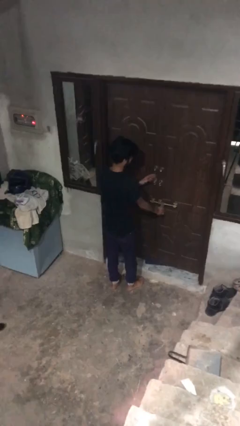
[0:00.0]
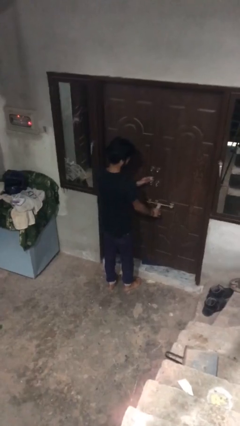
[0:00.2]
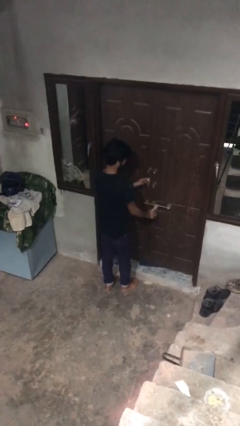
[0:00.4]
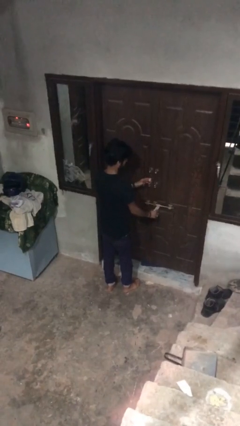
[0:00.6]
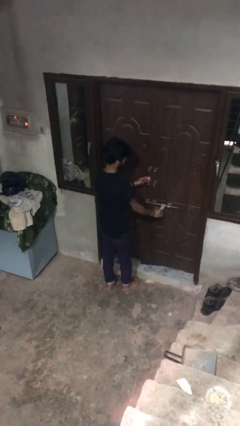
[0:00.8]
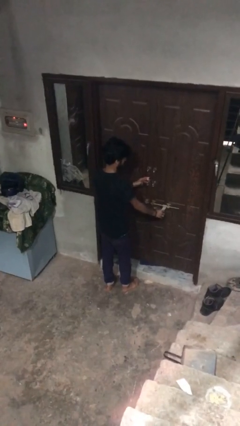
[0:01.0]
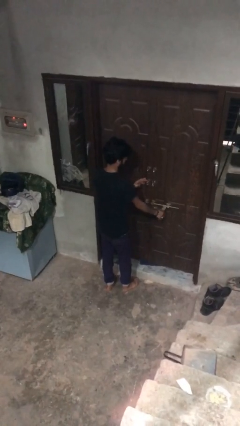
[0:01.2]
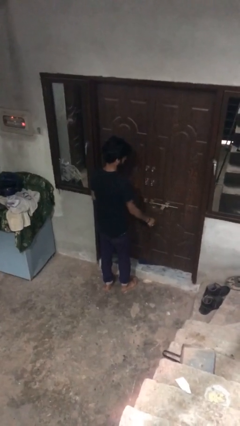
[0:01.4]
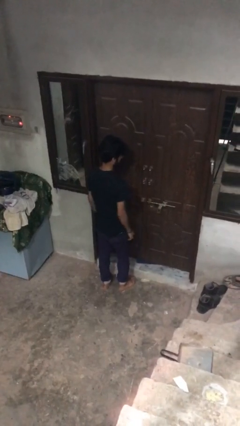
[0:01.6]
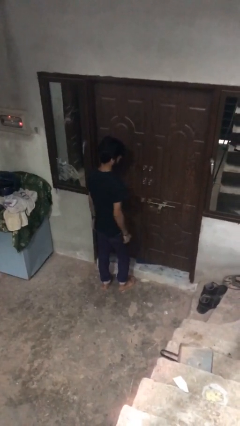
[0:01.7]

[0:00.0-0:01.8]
person unlocks door with keys

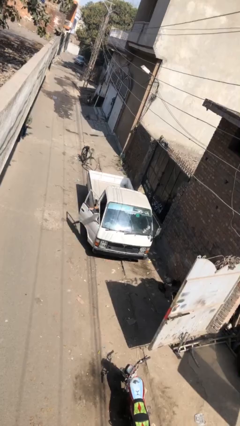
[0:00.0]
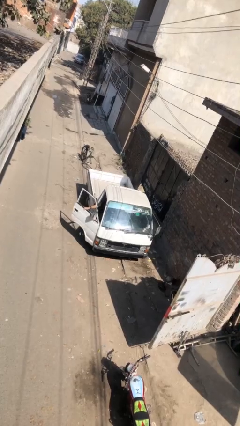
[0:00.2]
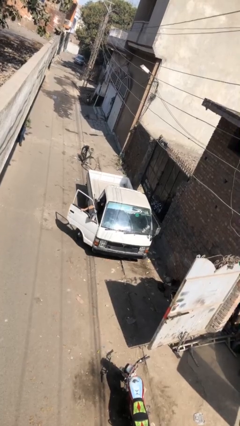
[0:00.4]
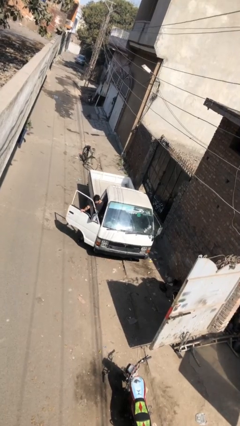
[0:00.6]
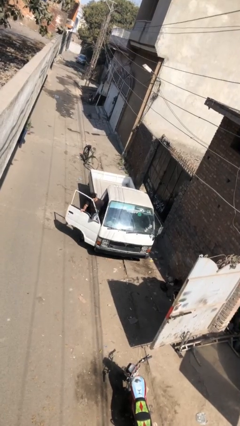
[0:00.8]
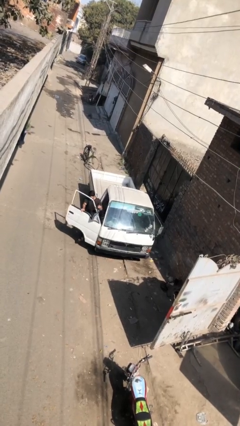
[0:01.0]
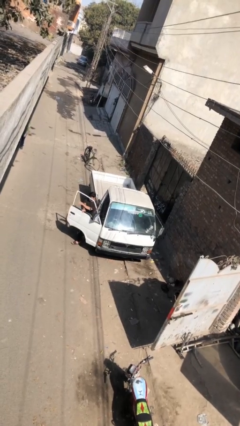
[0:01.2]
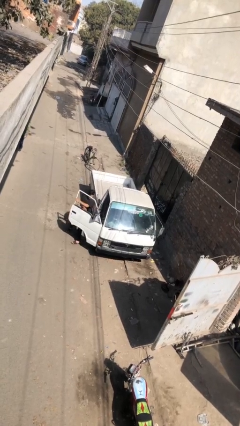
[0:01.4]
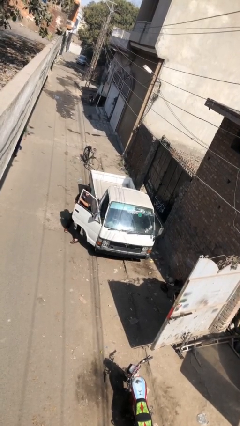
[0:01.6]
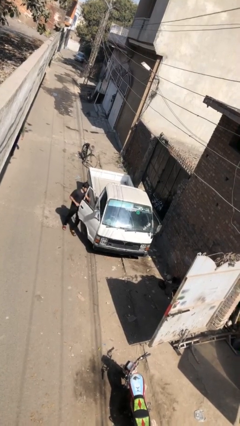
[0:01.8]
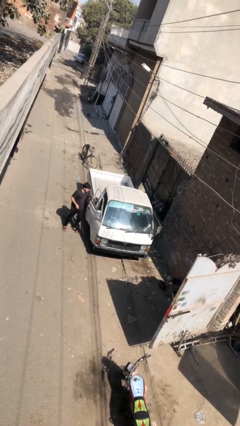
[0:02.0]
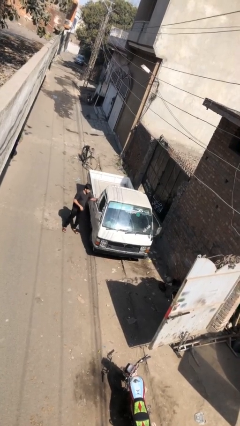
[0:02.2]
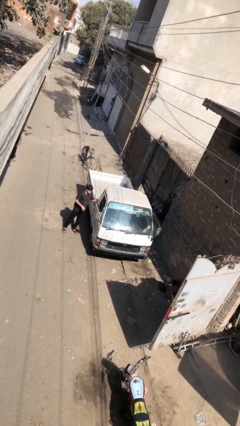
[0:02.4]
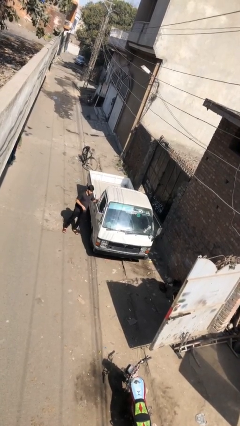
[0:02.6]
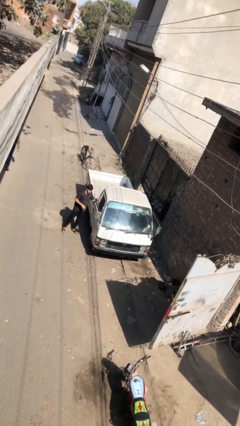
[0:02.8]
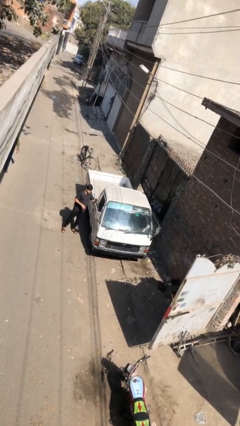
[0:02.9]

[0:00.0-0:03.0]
car drops off person

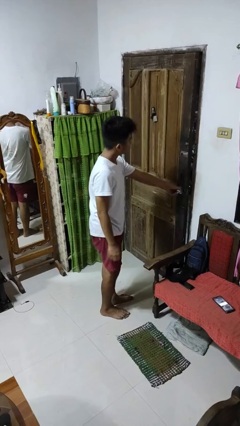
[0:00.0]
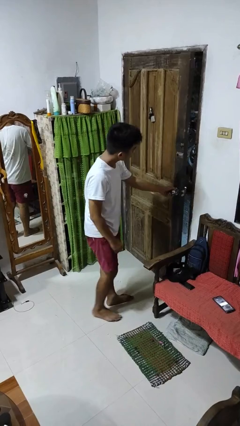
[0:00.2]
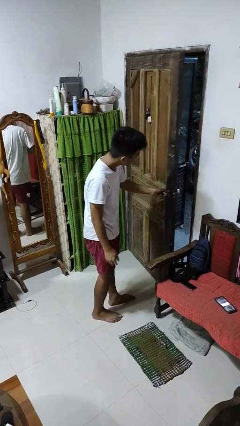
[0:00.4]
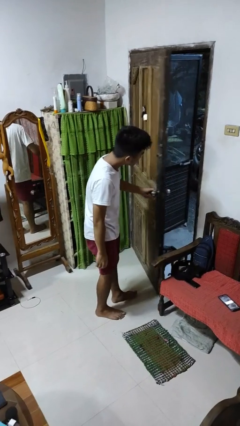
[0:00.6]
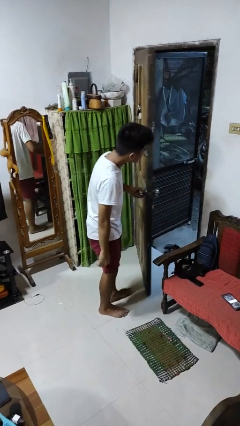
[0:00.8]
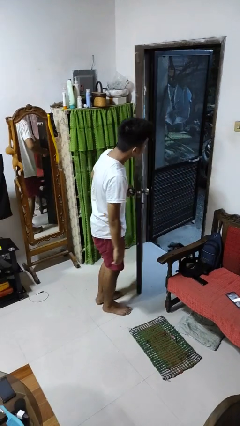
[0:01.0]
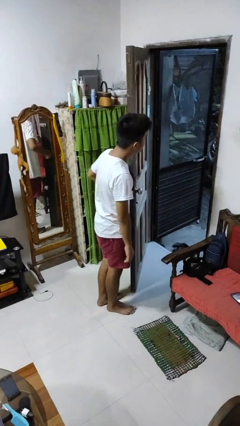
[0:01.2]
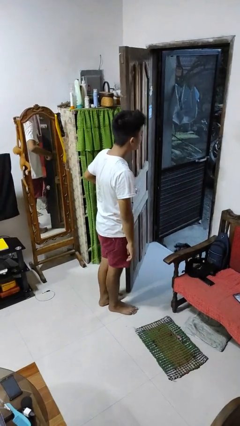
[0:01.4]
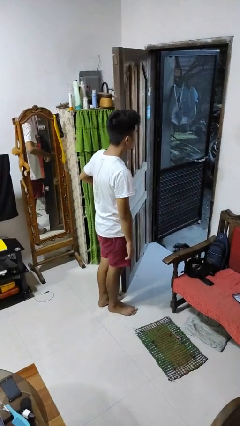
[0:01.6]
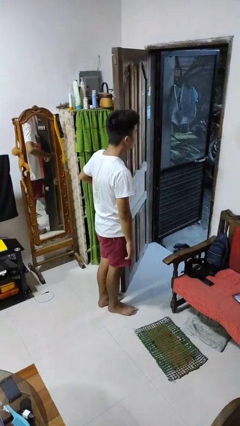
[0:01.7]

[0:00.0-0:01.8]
person opens facility door

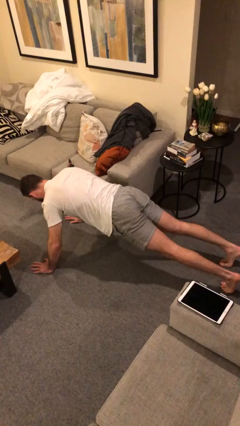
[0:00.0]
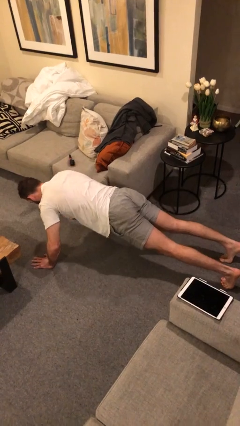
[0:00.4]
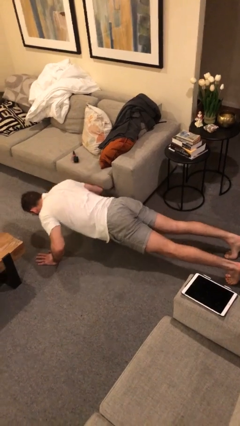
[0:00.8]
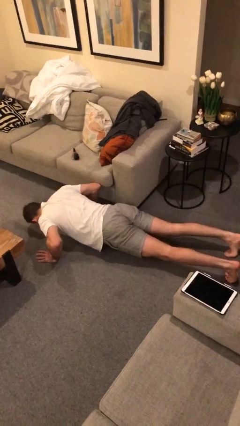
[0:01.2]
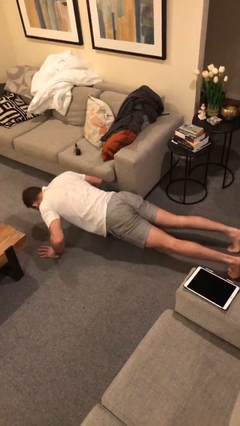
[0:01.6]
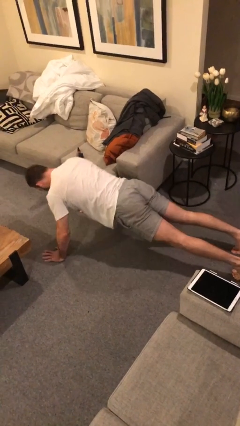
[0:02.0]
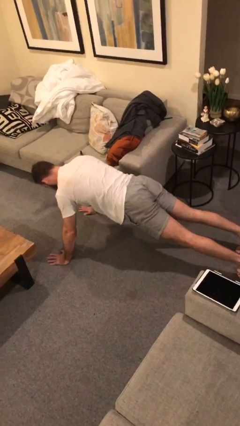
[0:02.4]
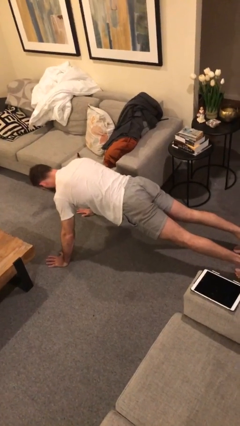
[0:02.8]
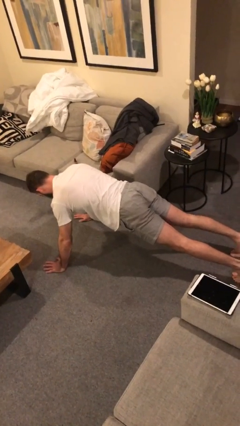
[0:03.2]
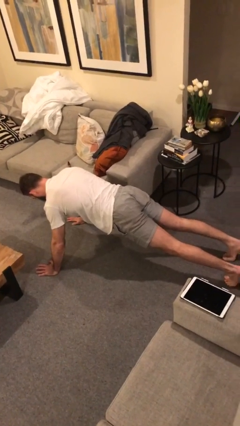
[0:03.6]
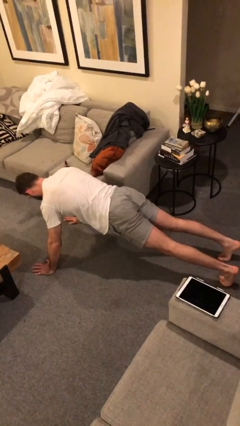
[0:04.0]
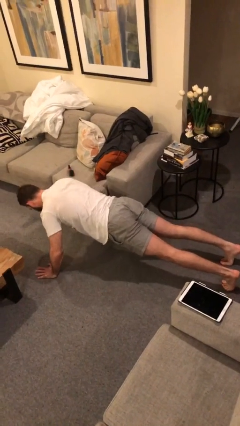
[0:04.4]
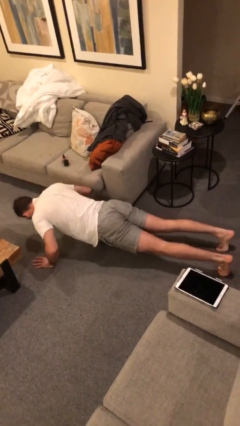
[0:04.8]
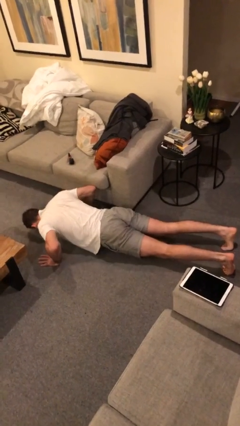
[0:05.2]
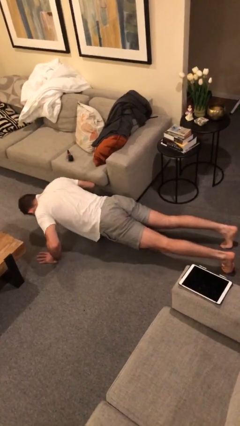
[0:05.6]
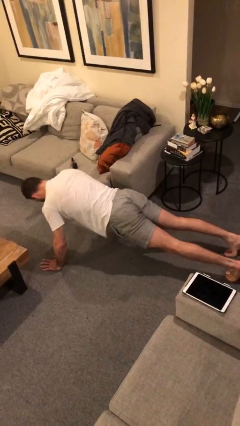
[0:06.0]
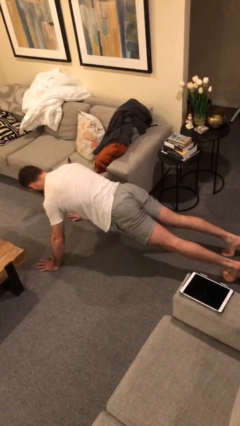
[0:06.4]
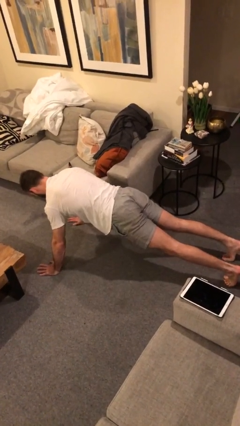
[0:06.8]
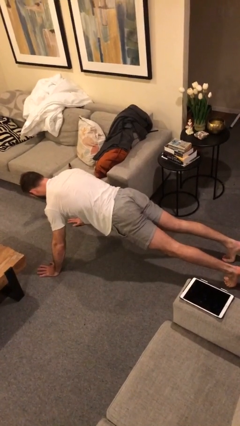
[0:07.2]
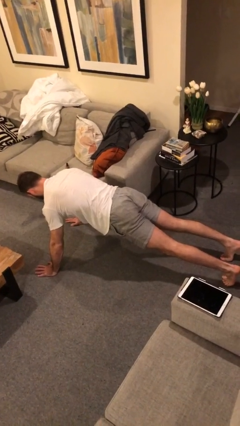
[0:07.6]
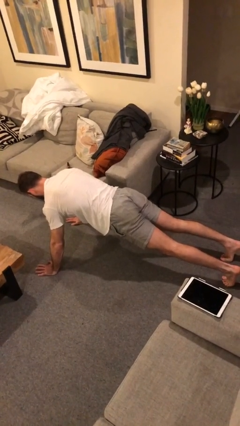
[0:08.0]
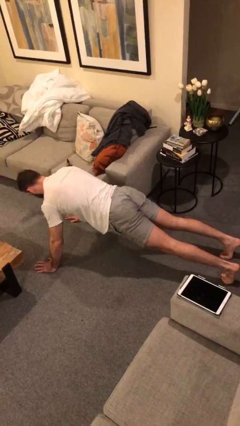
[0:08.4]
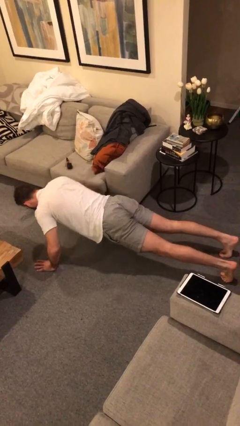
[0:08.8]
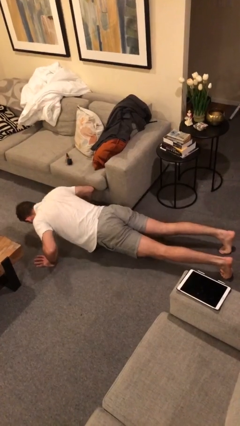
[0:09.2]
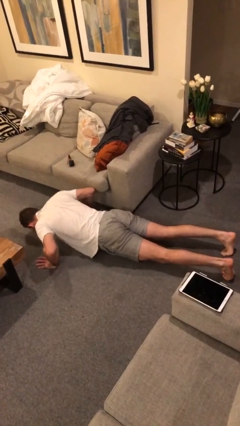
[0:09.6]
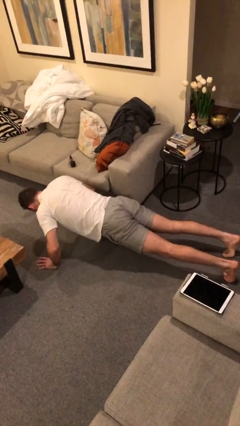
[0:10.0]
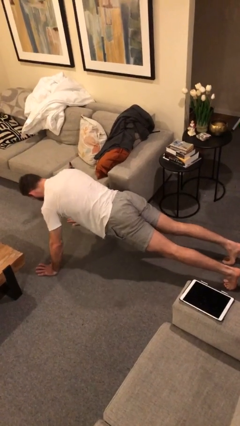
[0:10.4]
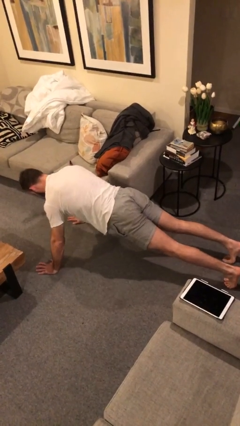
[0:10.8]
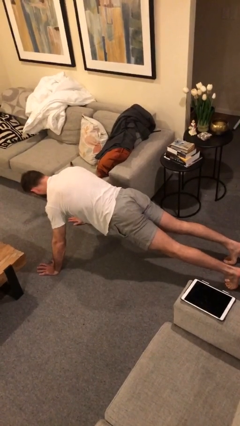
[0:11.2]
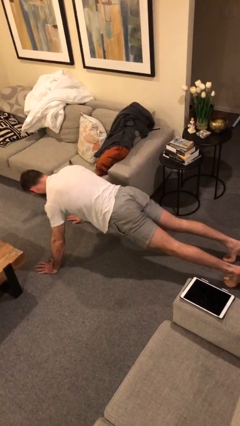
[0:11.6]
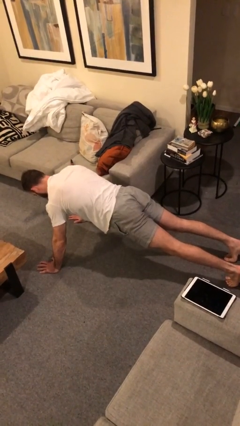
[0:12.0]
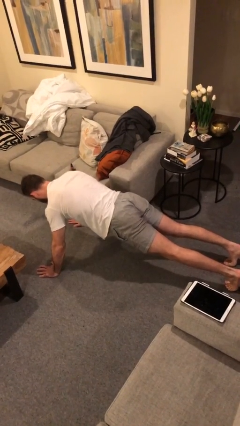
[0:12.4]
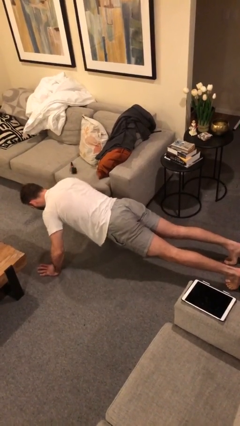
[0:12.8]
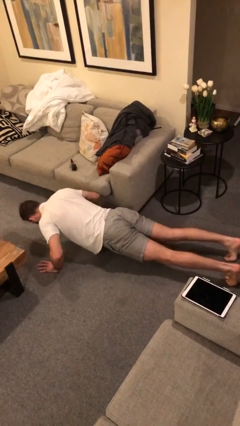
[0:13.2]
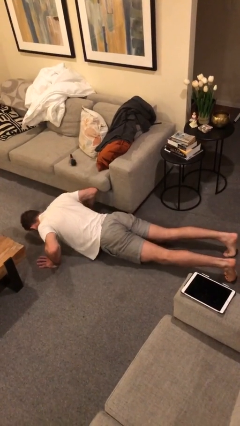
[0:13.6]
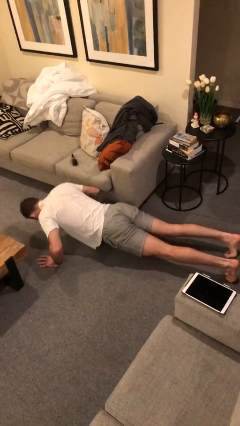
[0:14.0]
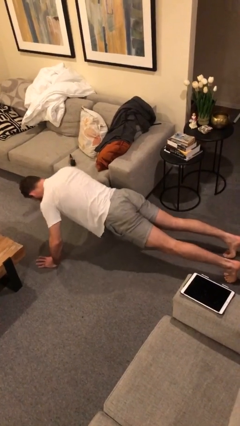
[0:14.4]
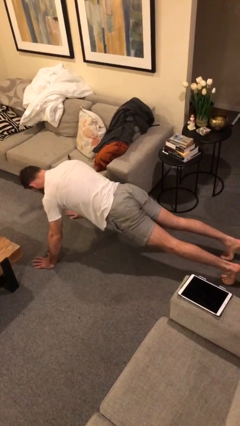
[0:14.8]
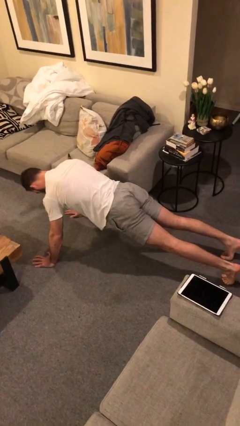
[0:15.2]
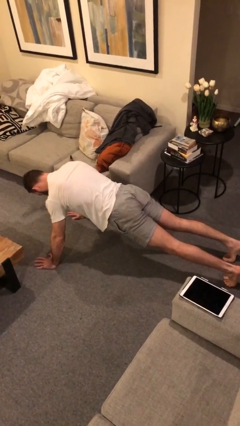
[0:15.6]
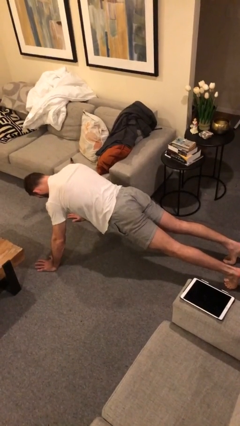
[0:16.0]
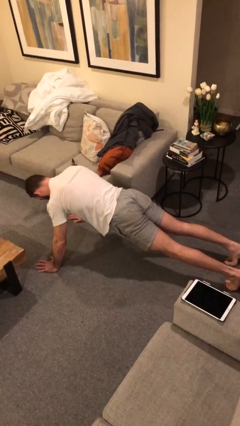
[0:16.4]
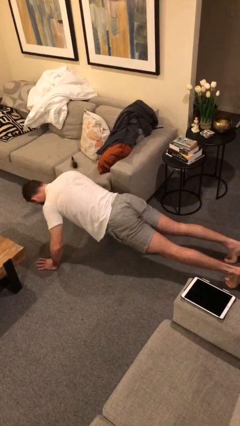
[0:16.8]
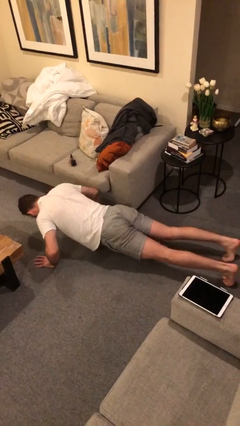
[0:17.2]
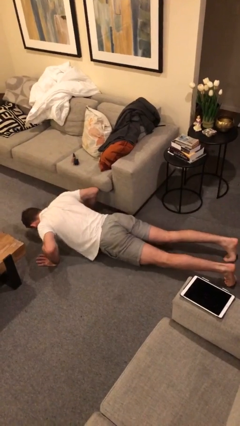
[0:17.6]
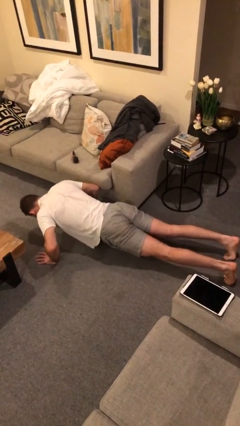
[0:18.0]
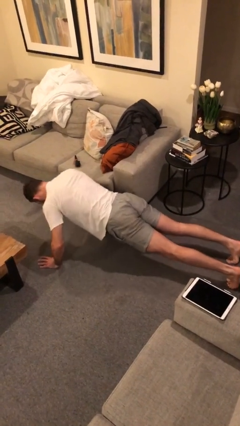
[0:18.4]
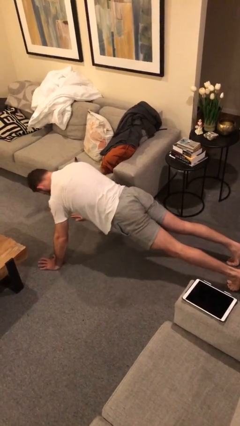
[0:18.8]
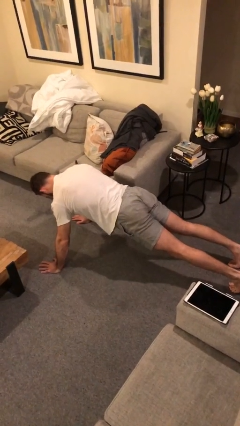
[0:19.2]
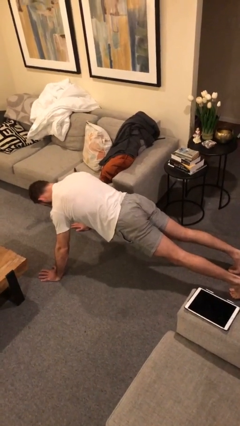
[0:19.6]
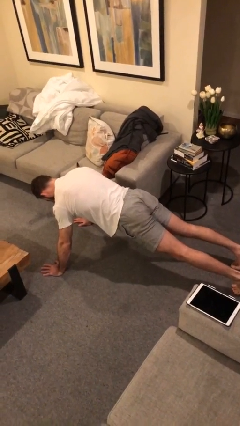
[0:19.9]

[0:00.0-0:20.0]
person exercises with pushup

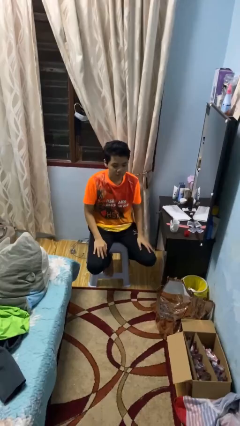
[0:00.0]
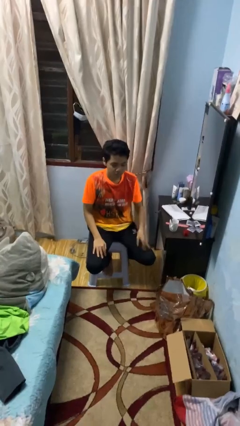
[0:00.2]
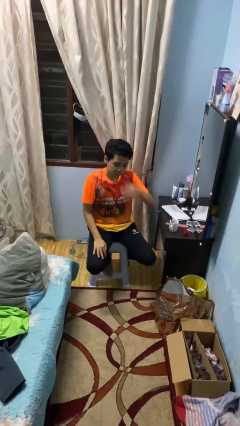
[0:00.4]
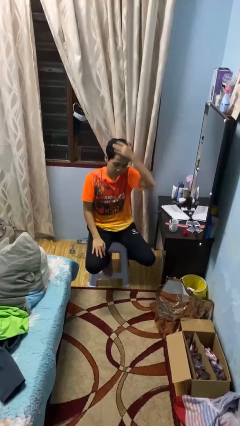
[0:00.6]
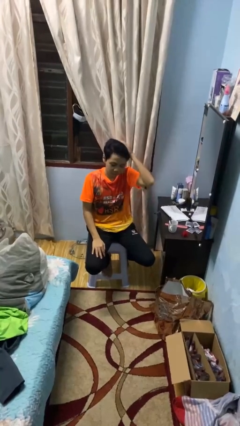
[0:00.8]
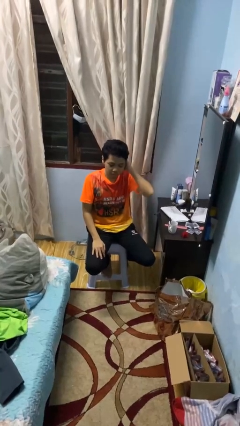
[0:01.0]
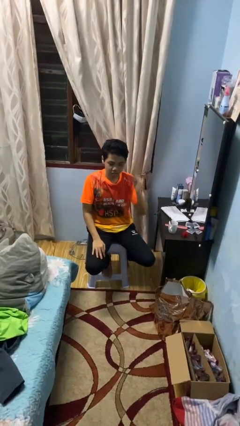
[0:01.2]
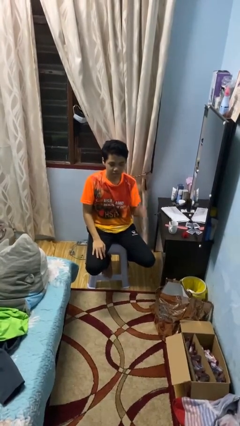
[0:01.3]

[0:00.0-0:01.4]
person strokes hair
